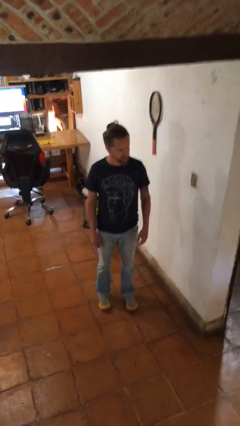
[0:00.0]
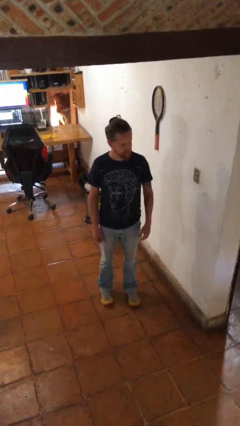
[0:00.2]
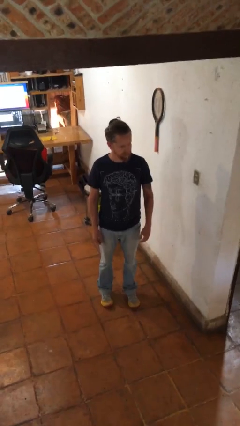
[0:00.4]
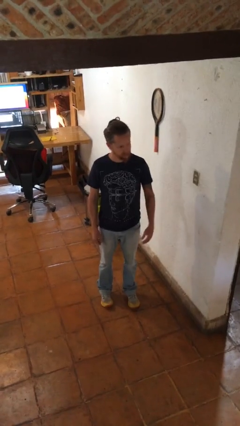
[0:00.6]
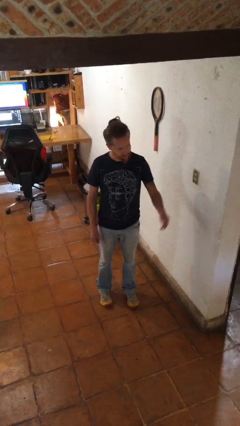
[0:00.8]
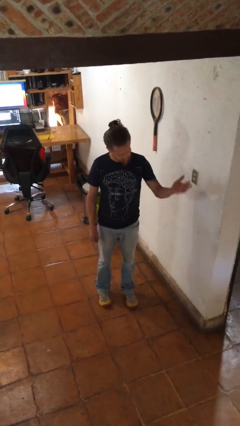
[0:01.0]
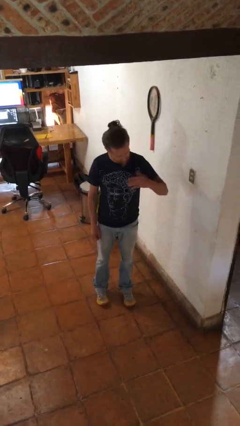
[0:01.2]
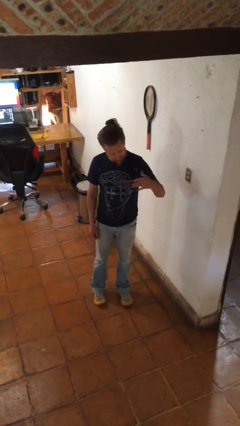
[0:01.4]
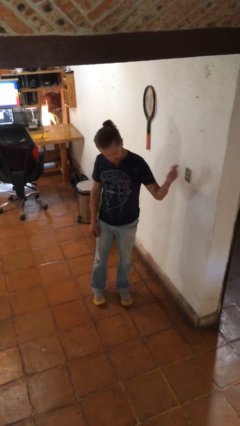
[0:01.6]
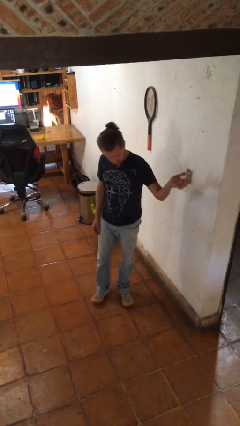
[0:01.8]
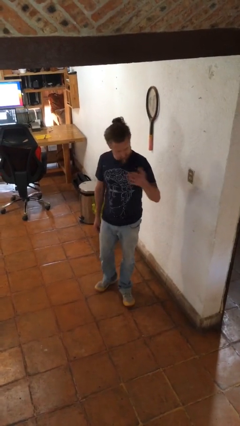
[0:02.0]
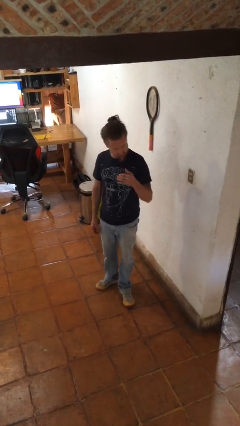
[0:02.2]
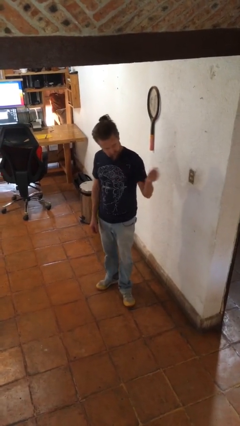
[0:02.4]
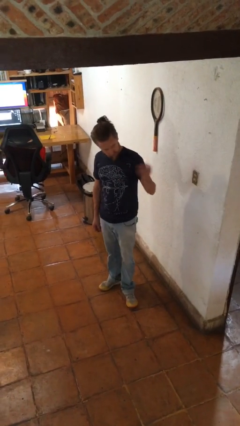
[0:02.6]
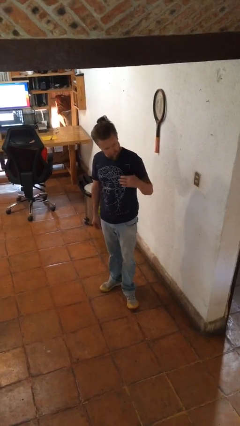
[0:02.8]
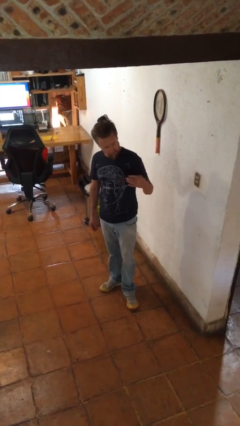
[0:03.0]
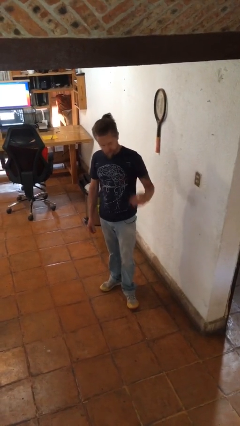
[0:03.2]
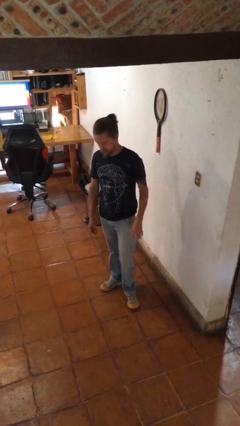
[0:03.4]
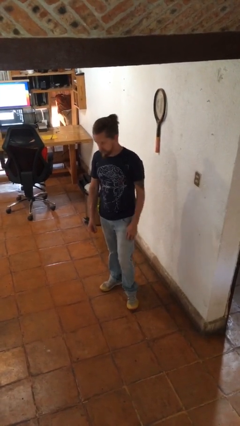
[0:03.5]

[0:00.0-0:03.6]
person gestures come here

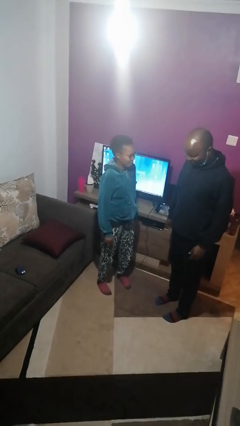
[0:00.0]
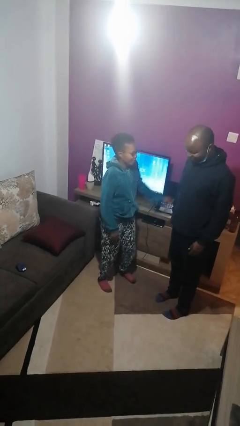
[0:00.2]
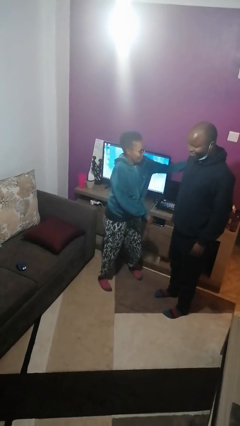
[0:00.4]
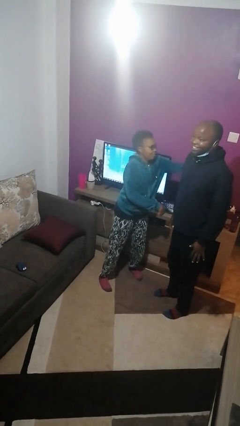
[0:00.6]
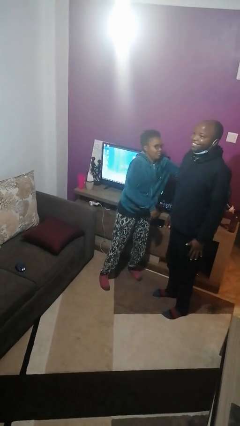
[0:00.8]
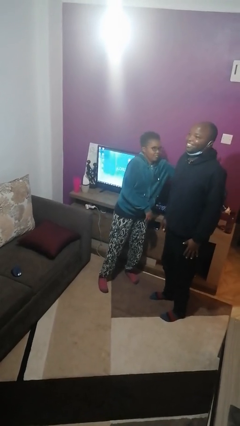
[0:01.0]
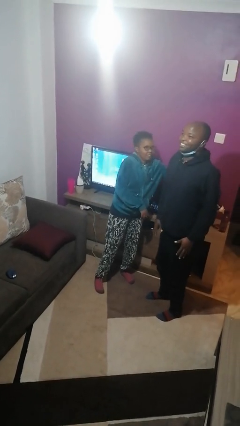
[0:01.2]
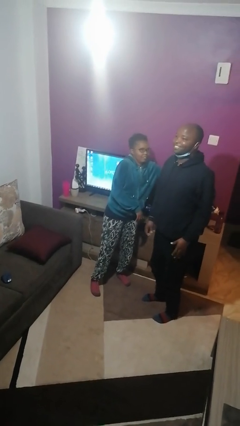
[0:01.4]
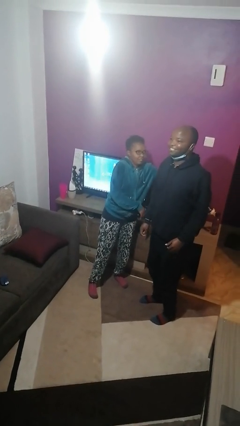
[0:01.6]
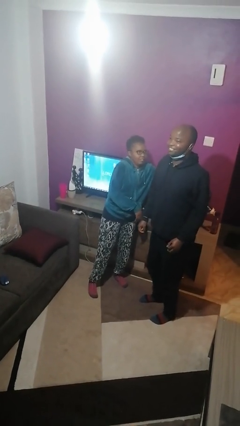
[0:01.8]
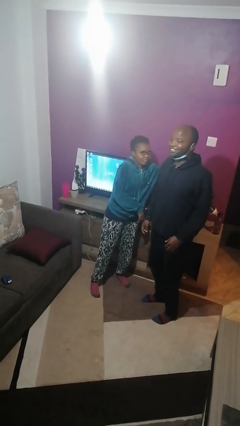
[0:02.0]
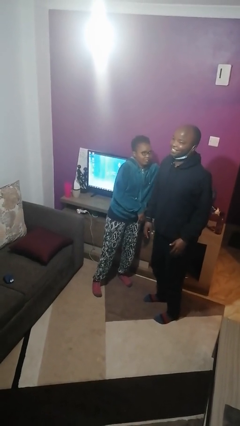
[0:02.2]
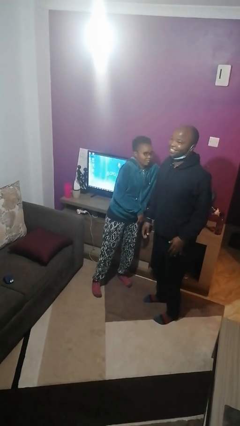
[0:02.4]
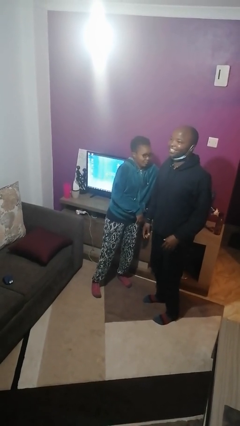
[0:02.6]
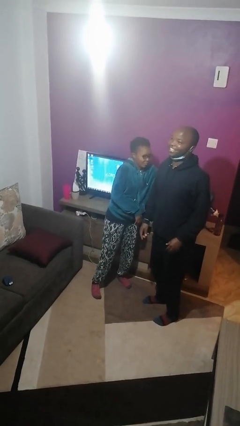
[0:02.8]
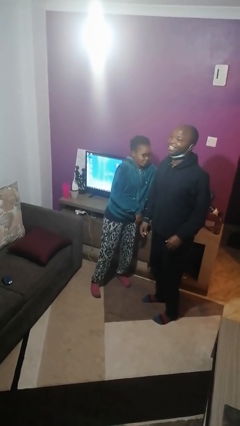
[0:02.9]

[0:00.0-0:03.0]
person tickles person

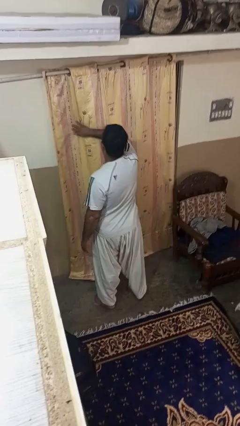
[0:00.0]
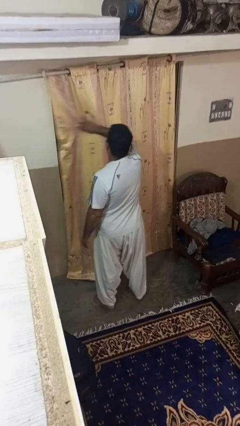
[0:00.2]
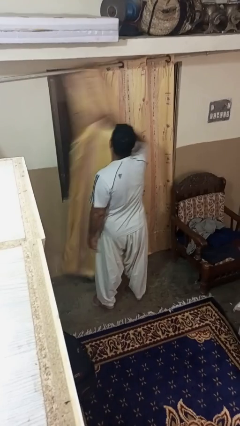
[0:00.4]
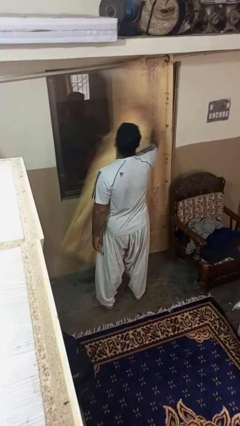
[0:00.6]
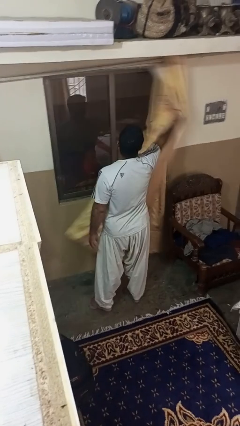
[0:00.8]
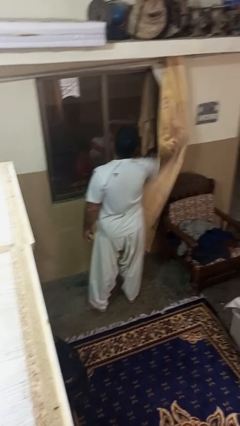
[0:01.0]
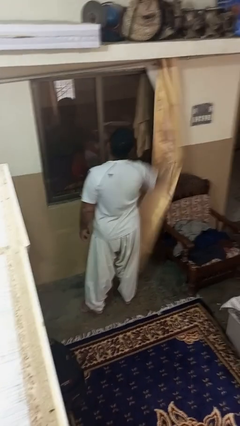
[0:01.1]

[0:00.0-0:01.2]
person opens curtains

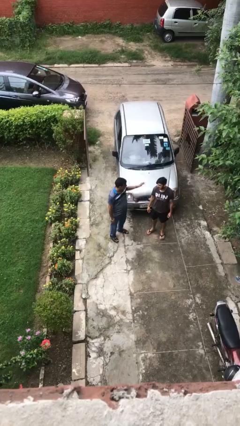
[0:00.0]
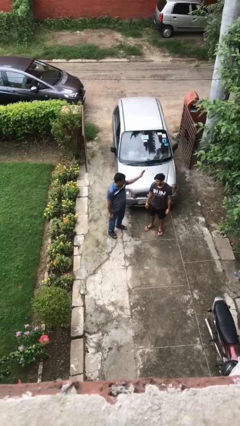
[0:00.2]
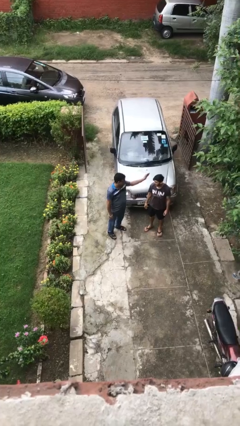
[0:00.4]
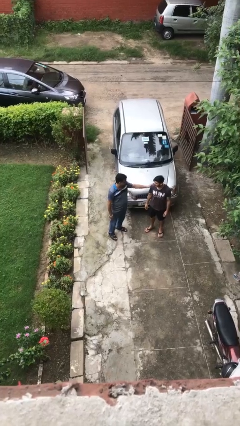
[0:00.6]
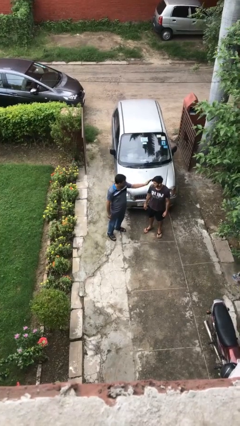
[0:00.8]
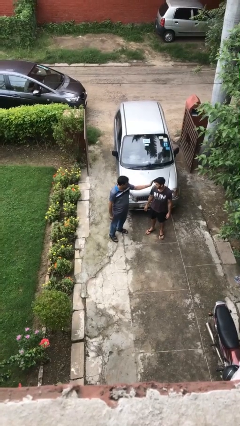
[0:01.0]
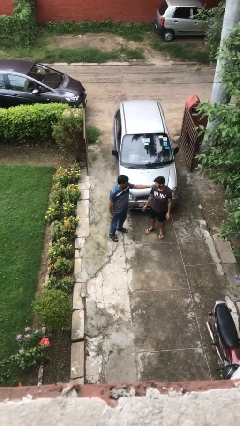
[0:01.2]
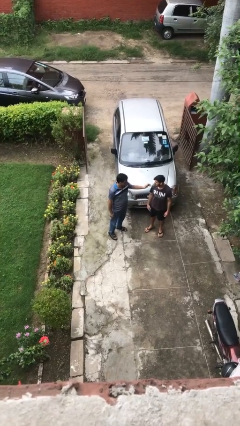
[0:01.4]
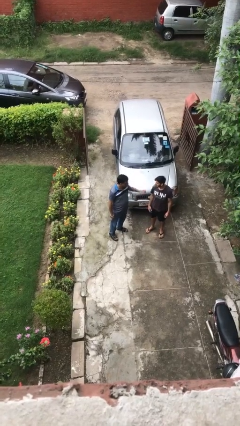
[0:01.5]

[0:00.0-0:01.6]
person pounds shoulders of person

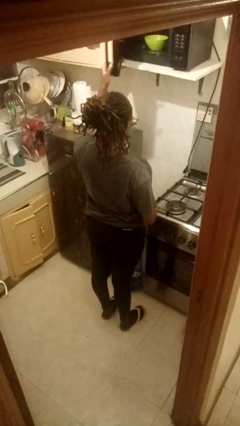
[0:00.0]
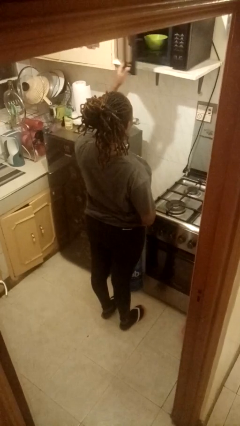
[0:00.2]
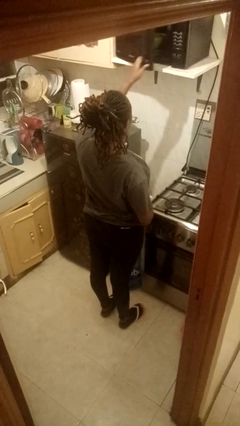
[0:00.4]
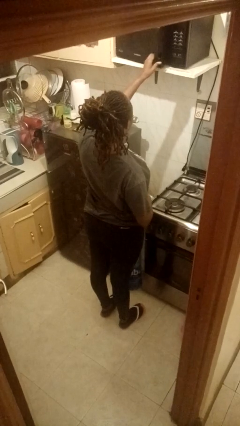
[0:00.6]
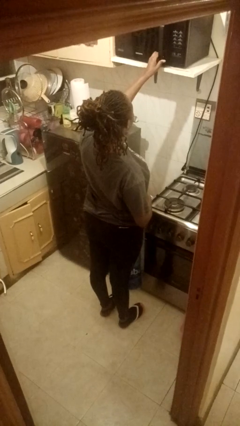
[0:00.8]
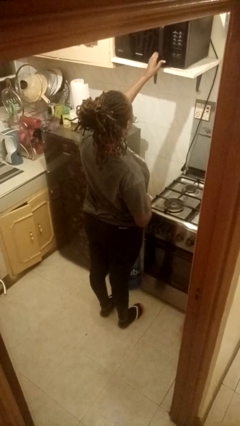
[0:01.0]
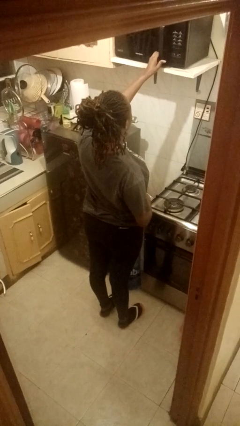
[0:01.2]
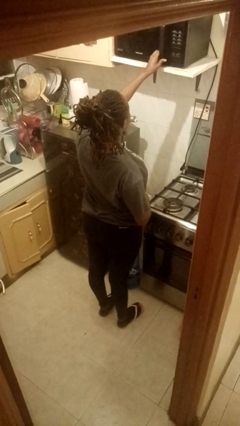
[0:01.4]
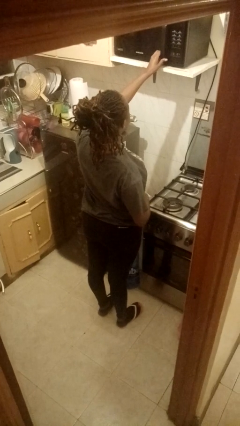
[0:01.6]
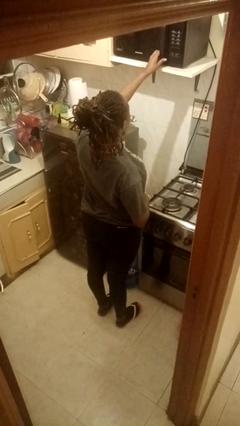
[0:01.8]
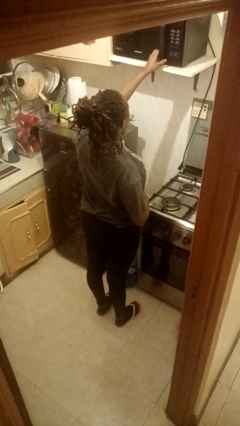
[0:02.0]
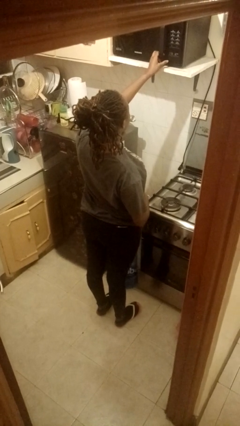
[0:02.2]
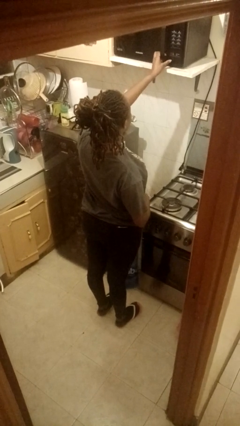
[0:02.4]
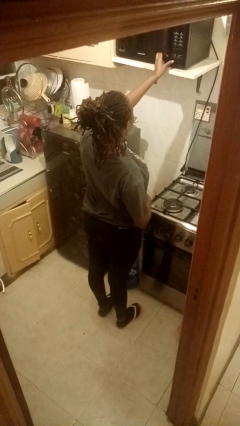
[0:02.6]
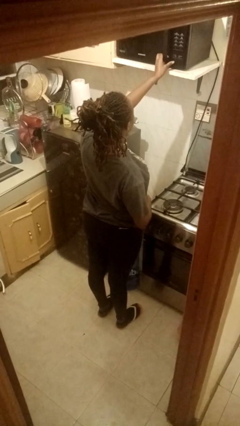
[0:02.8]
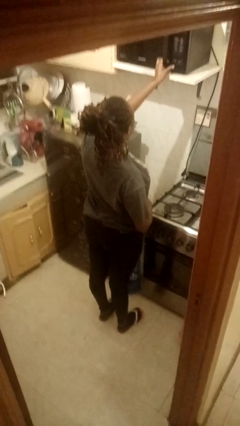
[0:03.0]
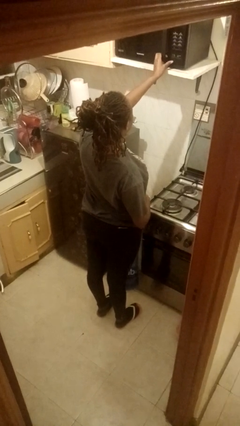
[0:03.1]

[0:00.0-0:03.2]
person closes microwave

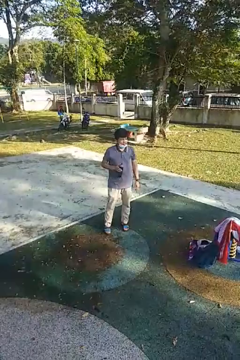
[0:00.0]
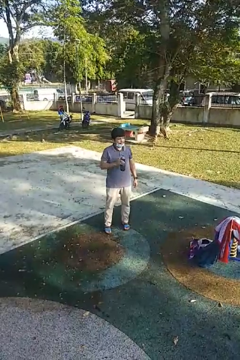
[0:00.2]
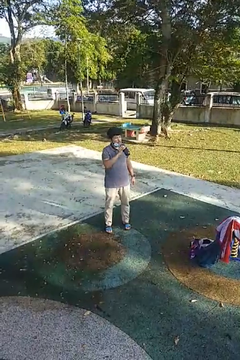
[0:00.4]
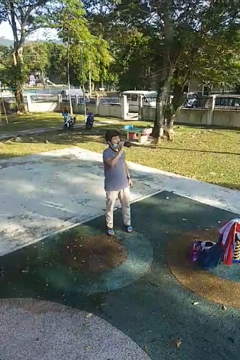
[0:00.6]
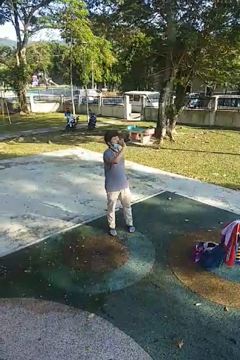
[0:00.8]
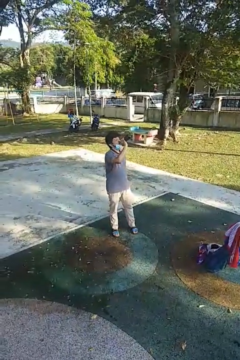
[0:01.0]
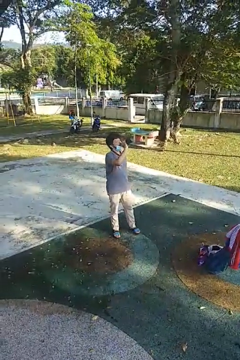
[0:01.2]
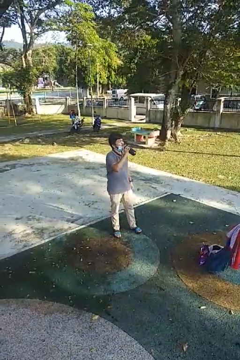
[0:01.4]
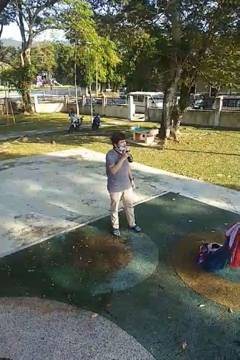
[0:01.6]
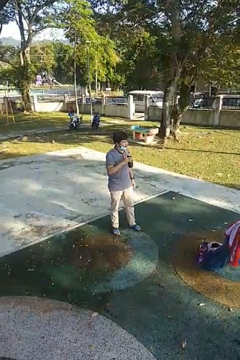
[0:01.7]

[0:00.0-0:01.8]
person drinks from bottle

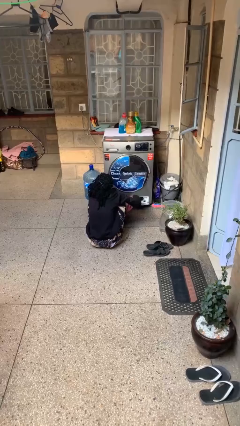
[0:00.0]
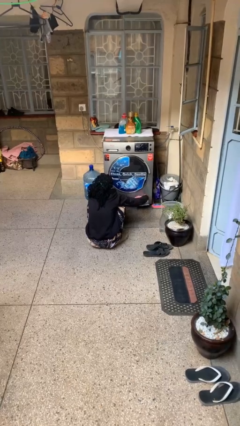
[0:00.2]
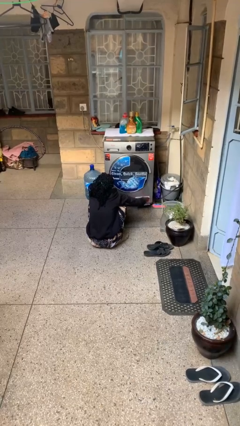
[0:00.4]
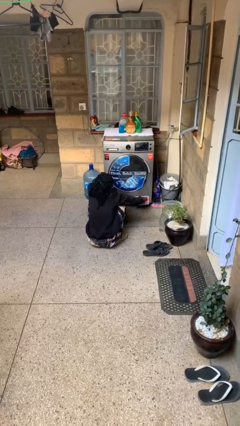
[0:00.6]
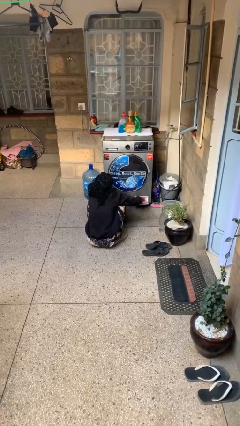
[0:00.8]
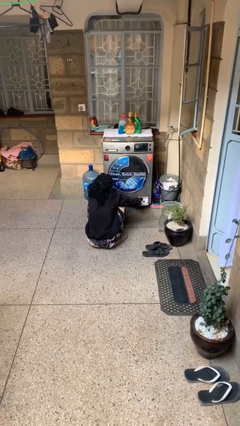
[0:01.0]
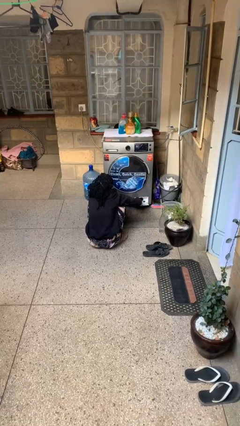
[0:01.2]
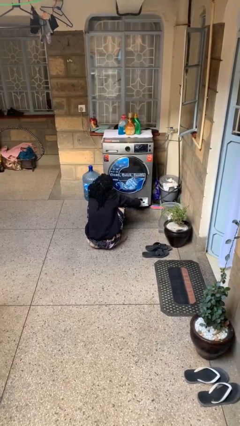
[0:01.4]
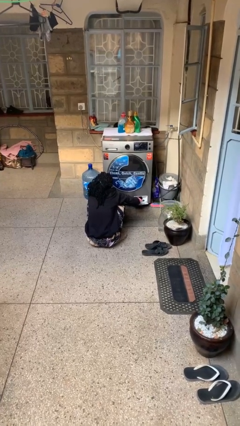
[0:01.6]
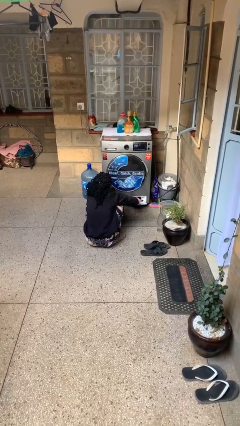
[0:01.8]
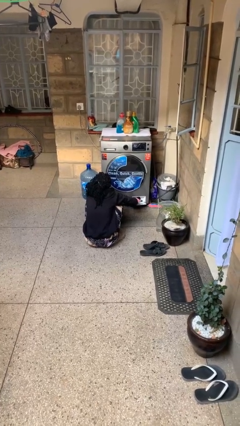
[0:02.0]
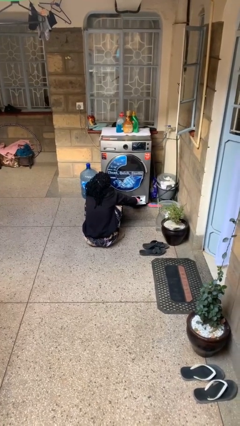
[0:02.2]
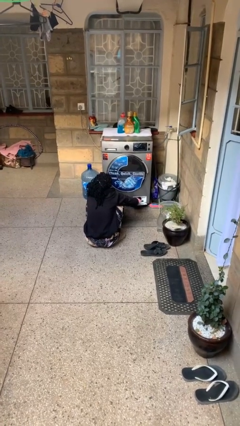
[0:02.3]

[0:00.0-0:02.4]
person cleans dryer lint trap

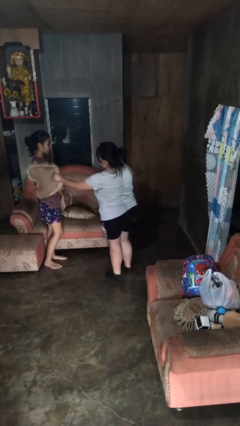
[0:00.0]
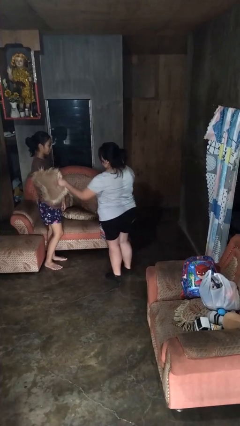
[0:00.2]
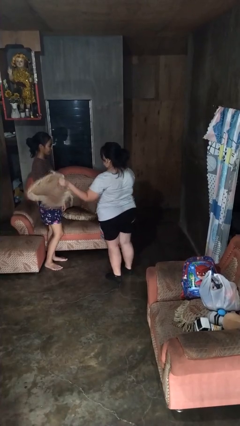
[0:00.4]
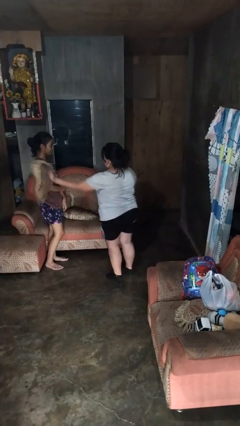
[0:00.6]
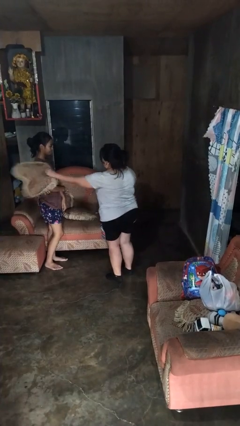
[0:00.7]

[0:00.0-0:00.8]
person hits person with pillow
